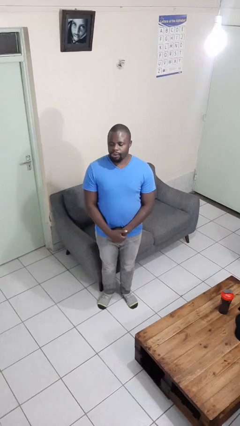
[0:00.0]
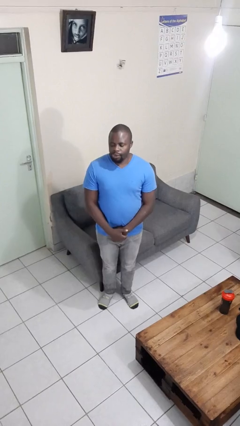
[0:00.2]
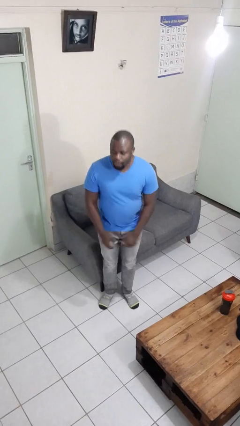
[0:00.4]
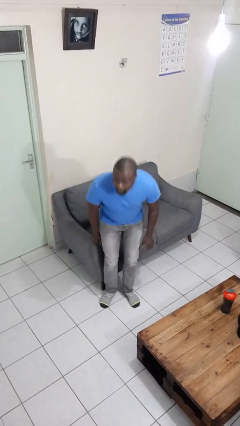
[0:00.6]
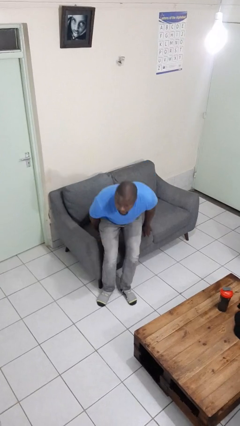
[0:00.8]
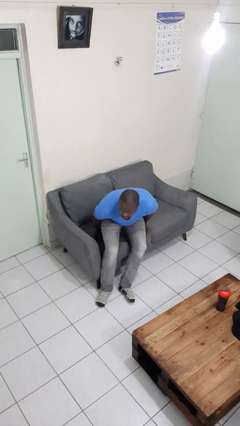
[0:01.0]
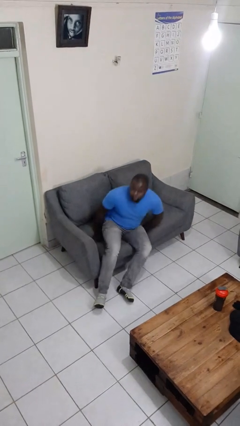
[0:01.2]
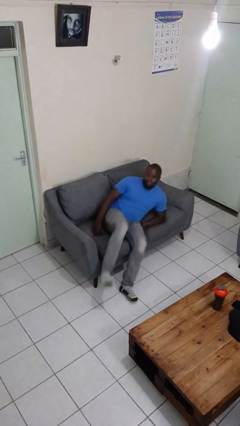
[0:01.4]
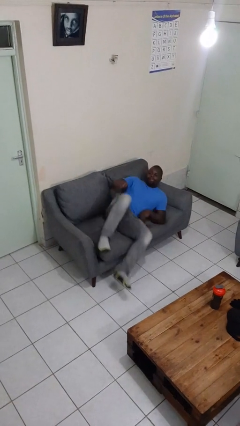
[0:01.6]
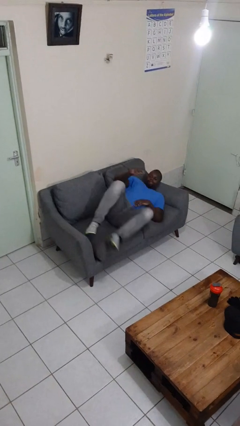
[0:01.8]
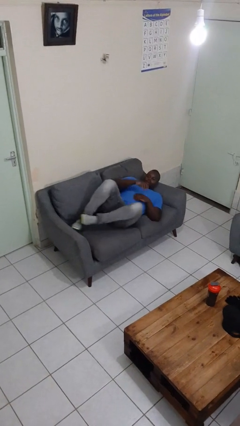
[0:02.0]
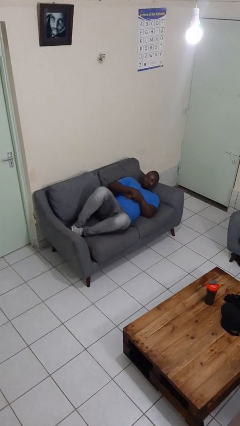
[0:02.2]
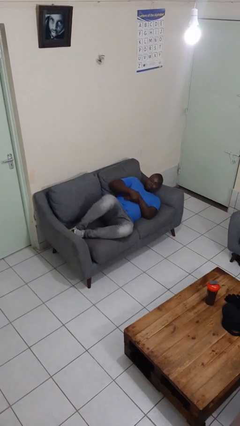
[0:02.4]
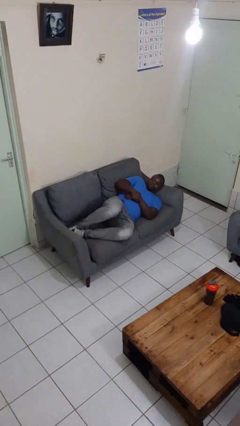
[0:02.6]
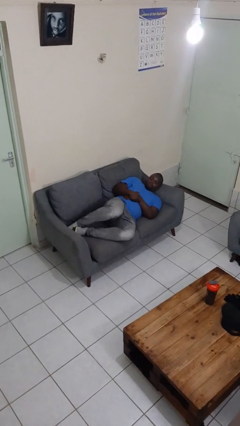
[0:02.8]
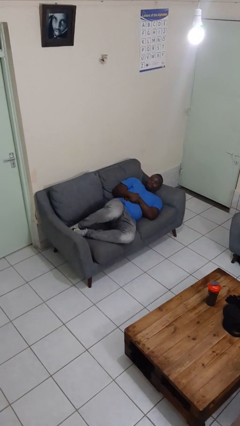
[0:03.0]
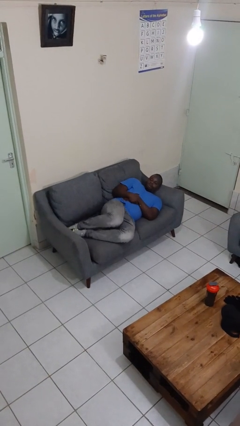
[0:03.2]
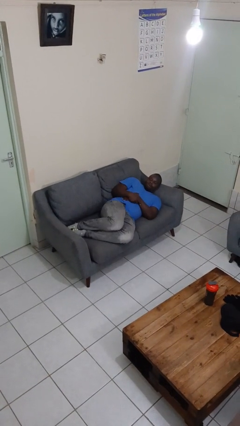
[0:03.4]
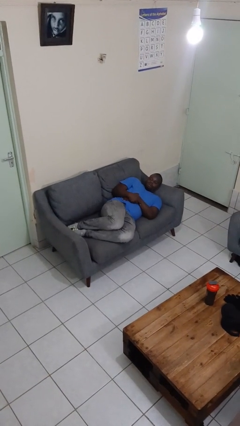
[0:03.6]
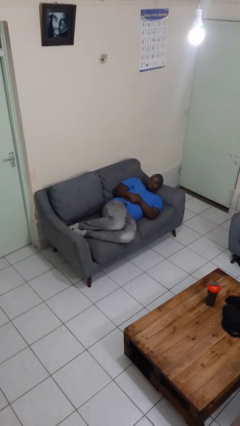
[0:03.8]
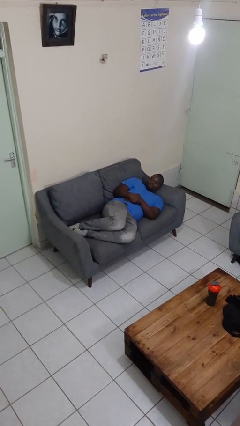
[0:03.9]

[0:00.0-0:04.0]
person lies down on couch

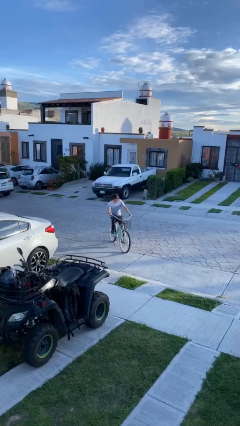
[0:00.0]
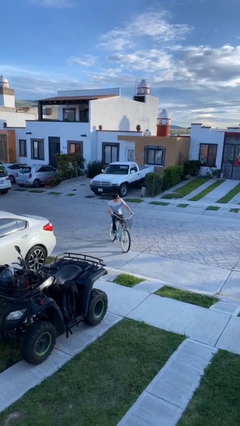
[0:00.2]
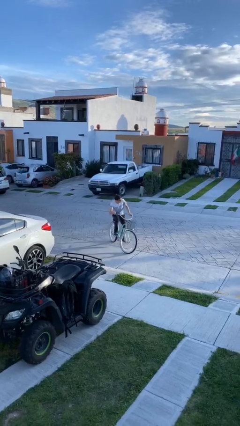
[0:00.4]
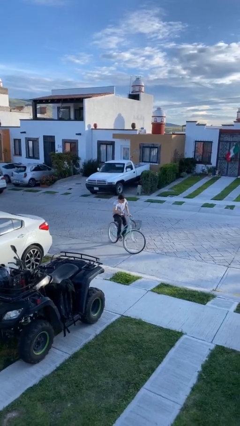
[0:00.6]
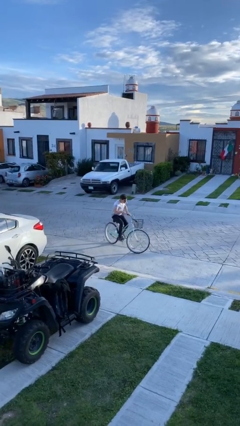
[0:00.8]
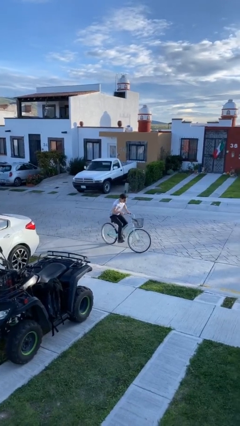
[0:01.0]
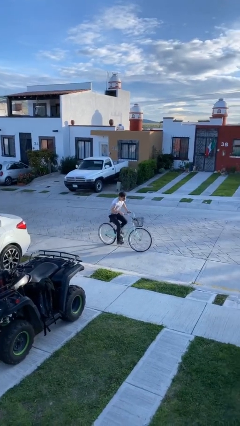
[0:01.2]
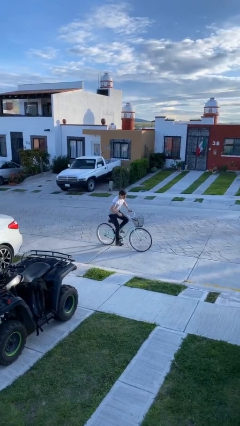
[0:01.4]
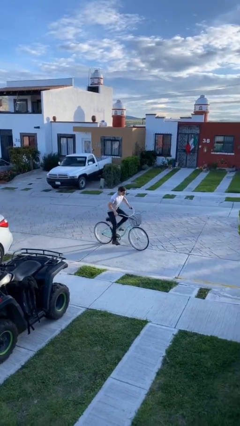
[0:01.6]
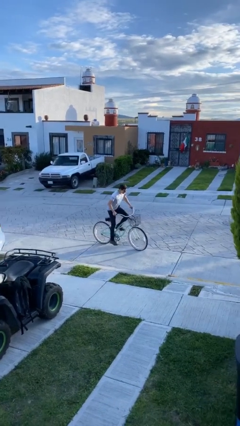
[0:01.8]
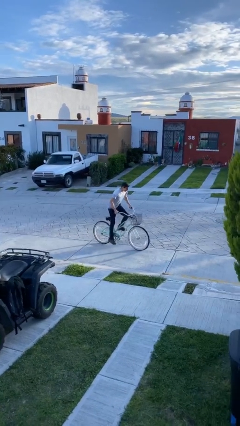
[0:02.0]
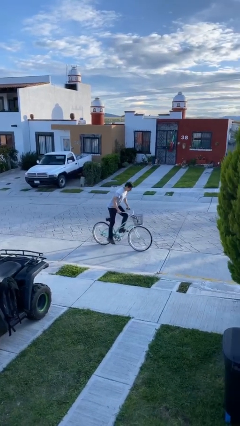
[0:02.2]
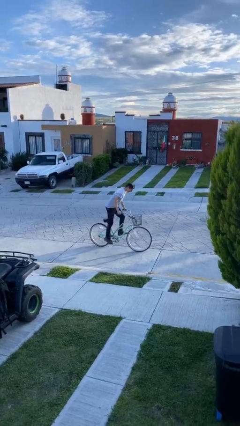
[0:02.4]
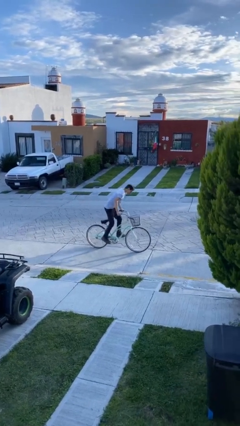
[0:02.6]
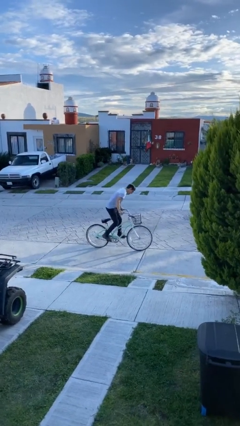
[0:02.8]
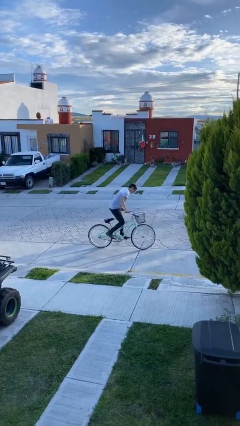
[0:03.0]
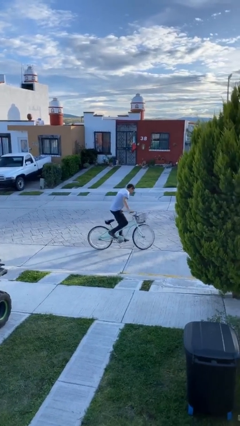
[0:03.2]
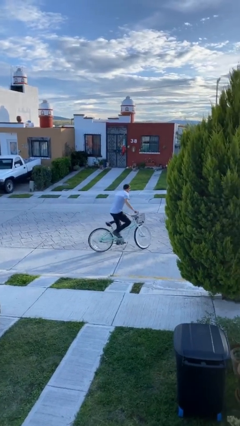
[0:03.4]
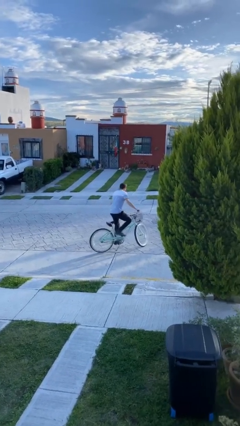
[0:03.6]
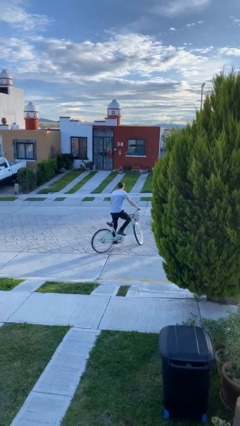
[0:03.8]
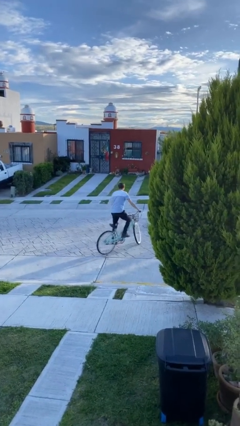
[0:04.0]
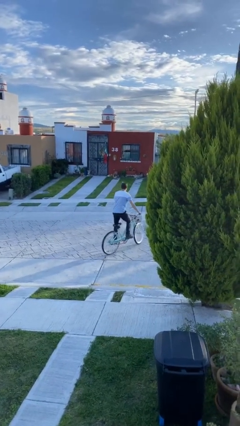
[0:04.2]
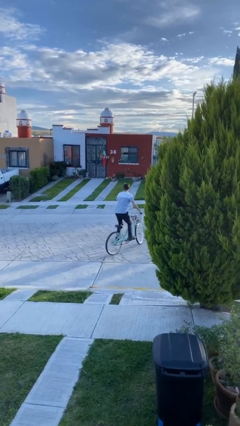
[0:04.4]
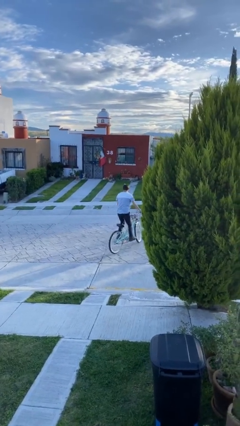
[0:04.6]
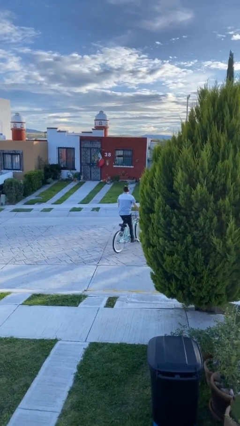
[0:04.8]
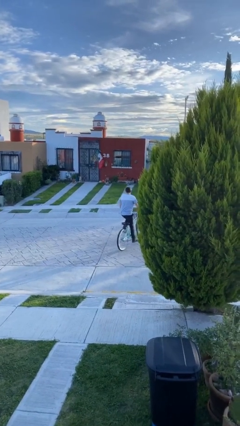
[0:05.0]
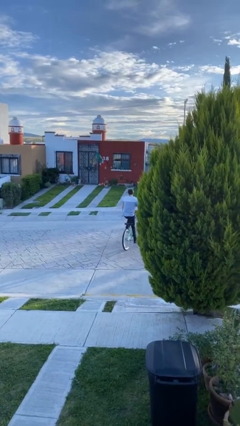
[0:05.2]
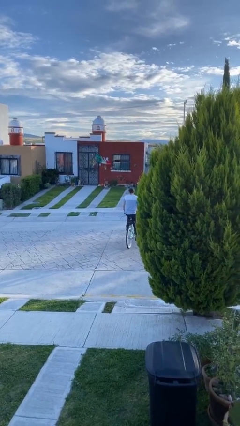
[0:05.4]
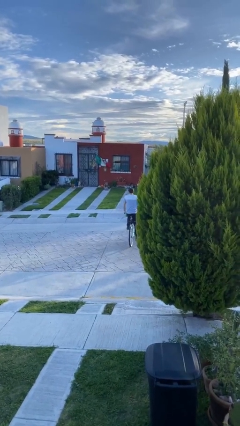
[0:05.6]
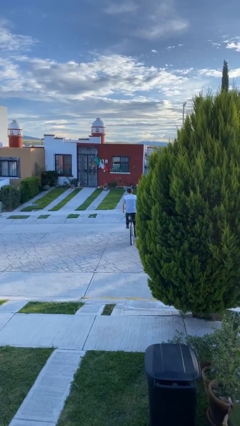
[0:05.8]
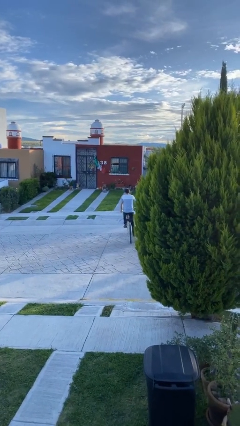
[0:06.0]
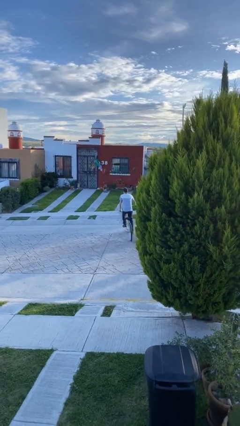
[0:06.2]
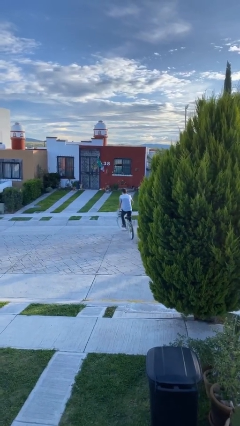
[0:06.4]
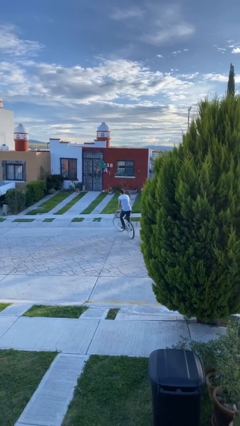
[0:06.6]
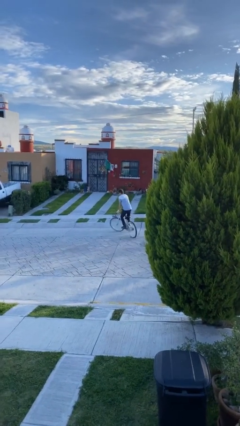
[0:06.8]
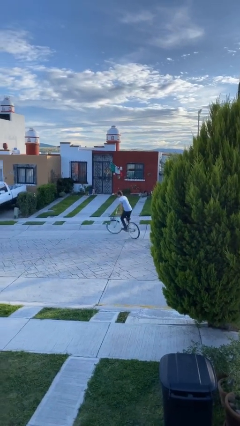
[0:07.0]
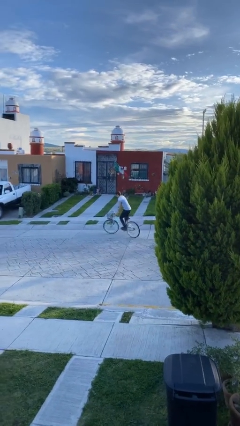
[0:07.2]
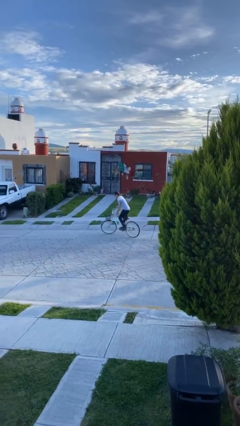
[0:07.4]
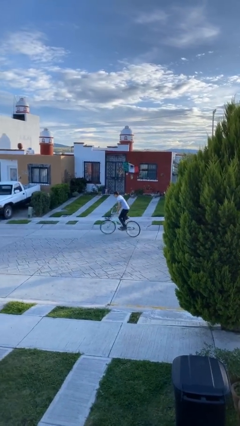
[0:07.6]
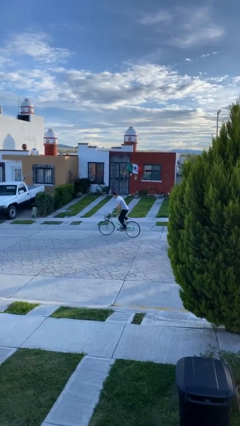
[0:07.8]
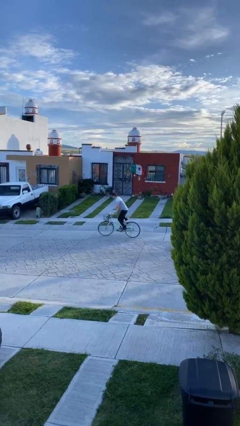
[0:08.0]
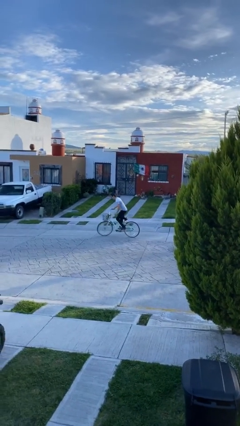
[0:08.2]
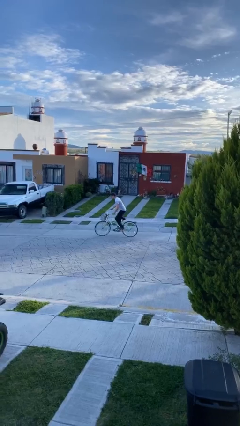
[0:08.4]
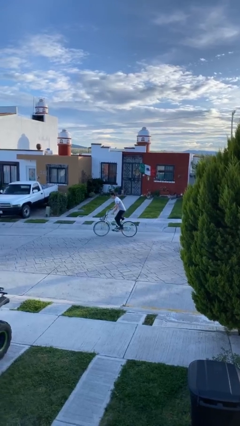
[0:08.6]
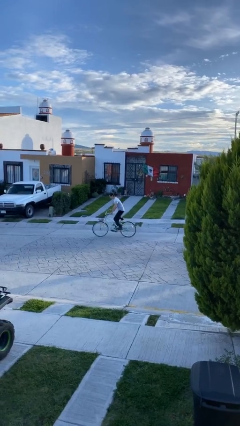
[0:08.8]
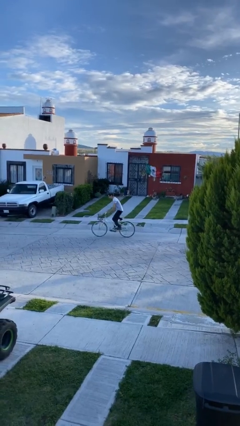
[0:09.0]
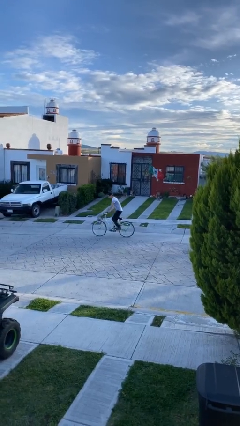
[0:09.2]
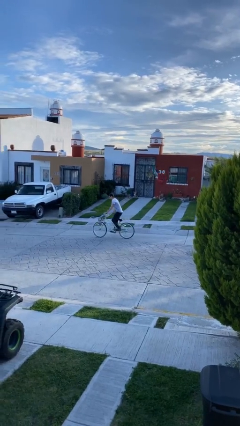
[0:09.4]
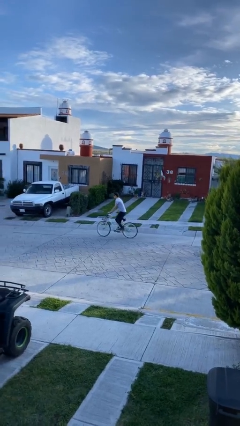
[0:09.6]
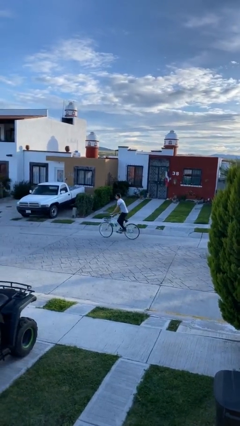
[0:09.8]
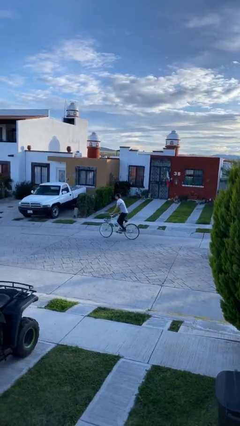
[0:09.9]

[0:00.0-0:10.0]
person rides bicycle

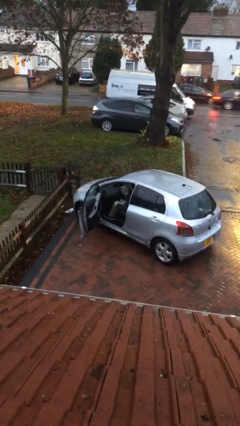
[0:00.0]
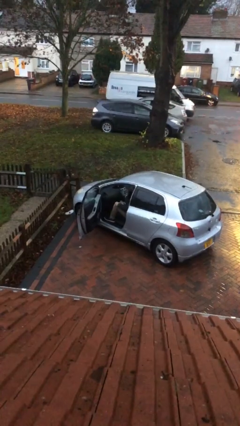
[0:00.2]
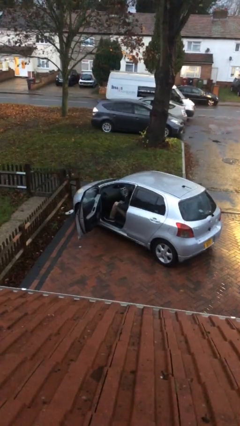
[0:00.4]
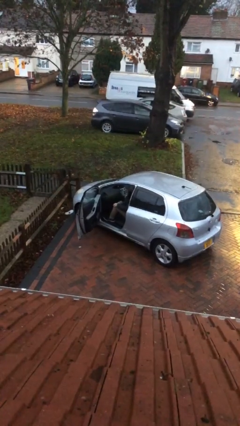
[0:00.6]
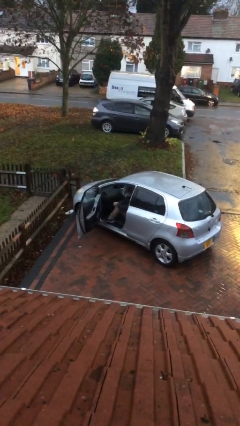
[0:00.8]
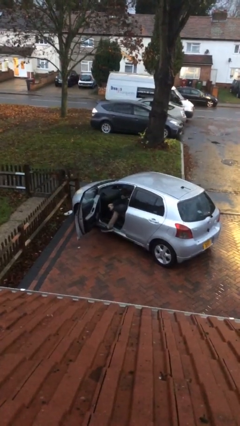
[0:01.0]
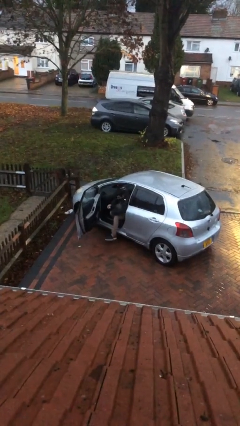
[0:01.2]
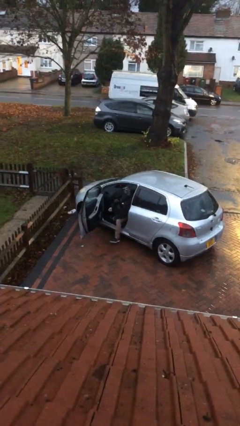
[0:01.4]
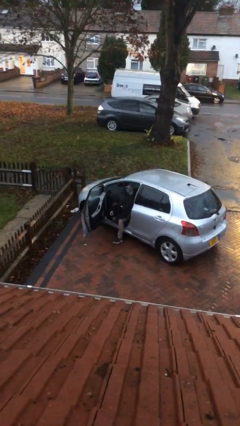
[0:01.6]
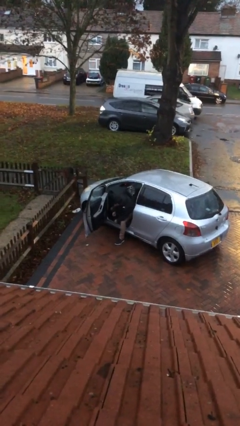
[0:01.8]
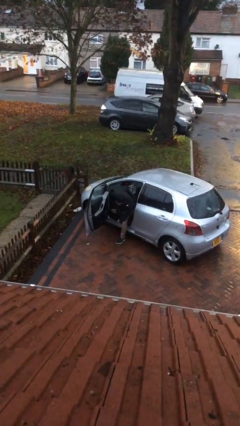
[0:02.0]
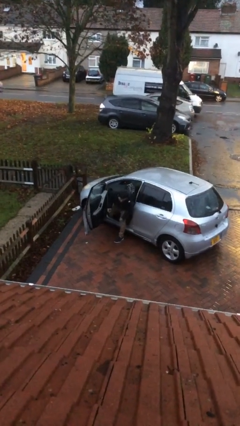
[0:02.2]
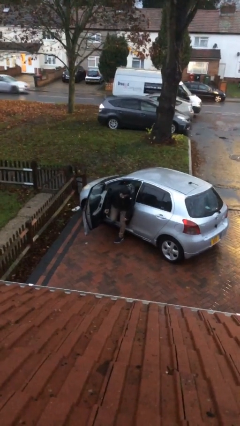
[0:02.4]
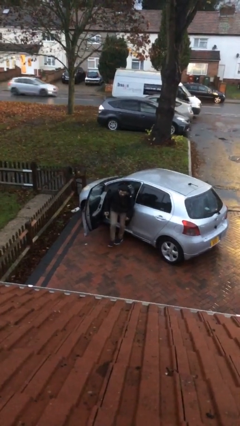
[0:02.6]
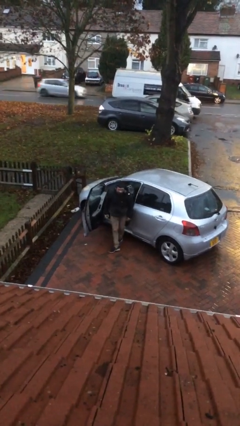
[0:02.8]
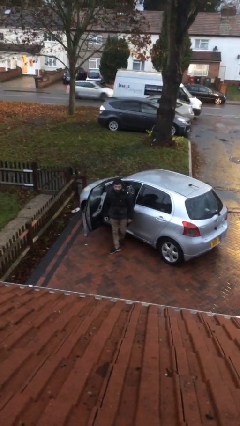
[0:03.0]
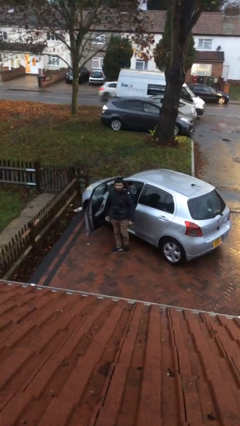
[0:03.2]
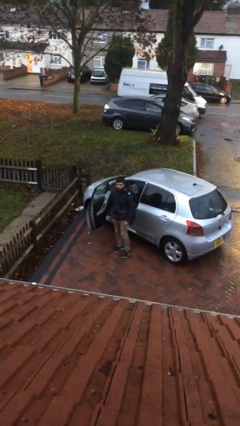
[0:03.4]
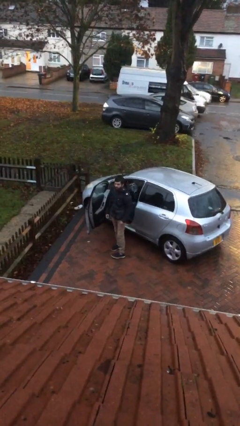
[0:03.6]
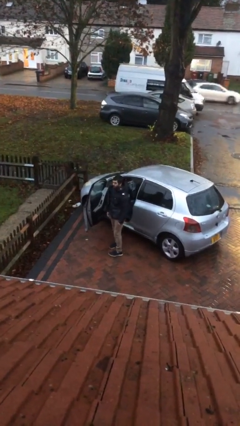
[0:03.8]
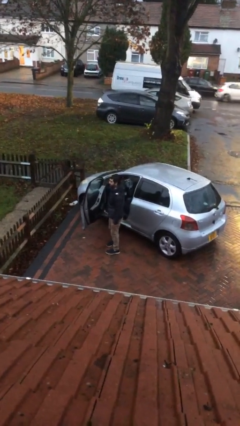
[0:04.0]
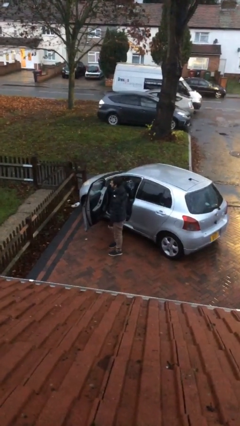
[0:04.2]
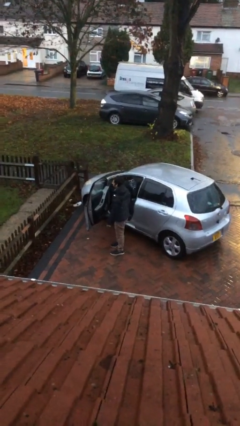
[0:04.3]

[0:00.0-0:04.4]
person exits car
